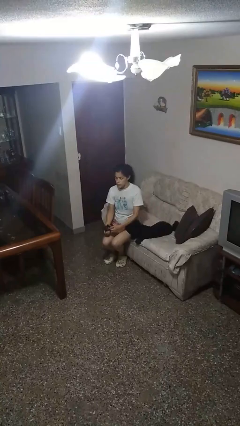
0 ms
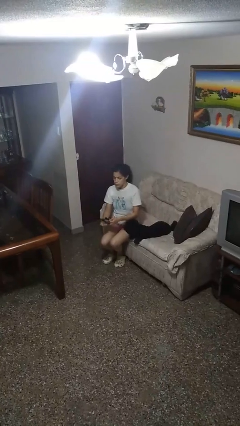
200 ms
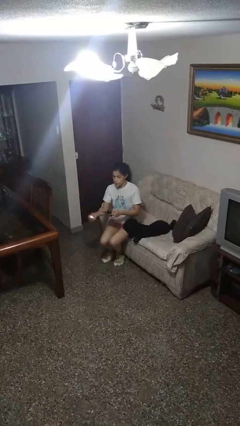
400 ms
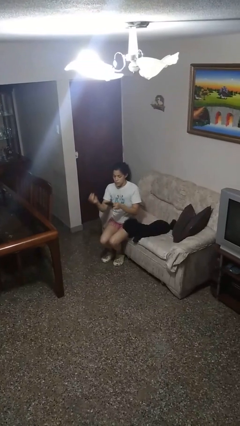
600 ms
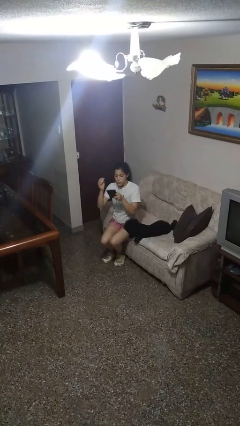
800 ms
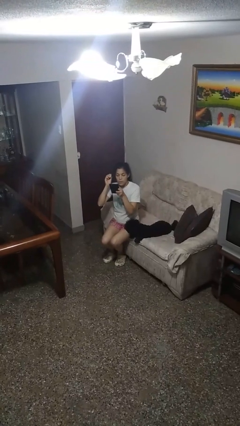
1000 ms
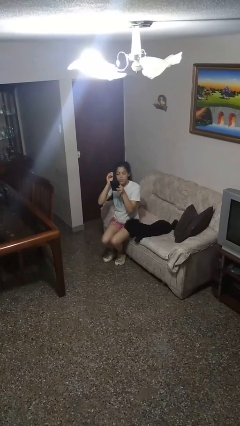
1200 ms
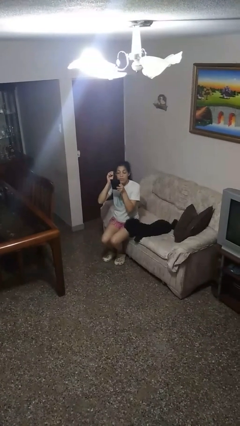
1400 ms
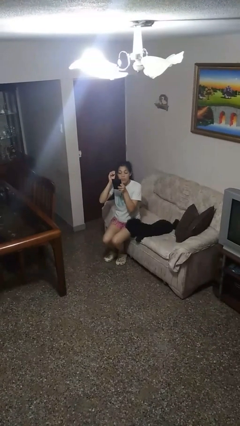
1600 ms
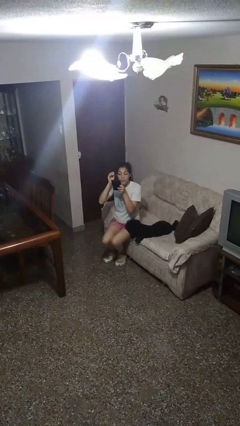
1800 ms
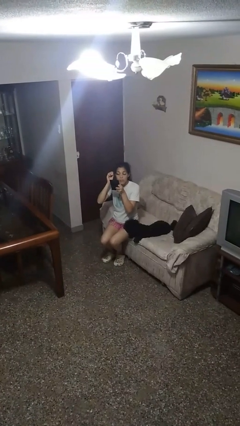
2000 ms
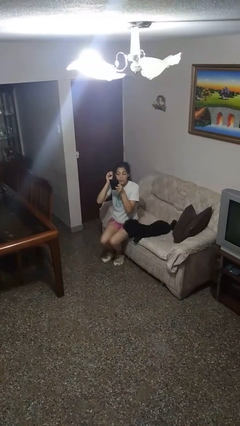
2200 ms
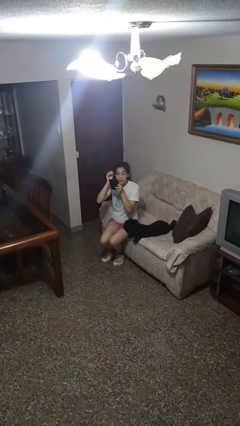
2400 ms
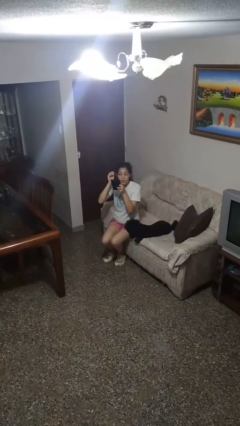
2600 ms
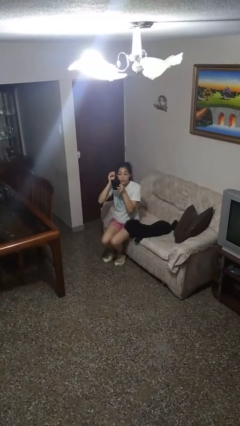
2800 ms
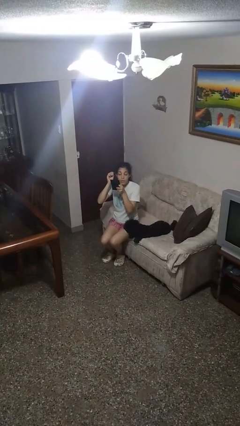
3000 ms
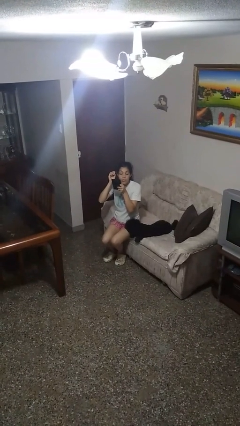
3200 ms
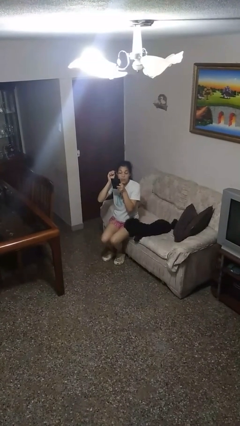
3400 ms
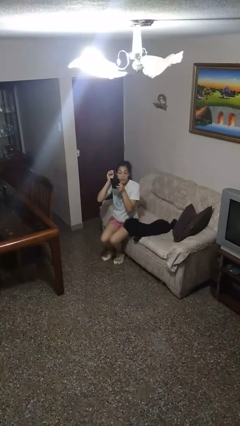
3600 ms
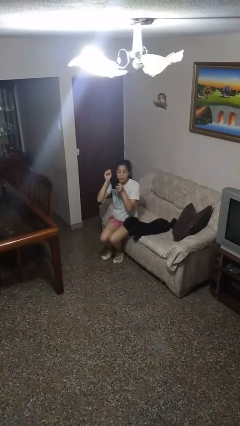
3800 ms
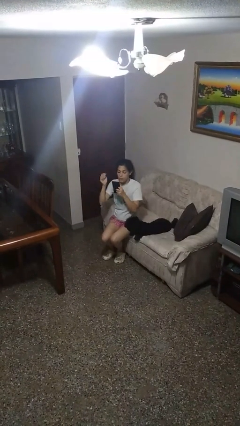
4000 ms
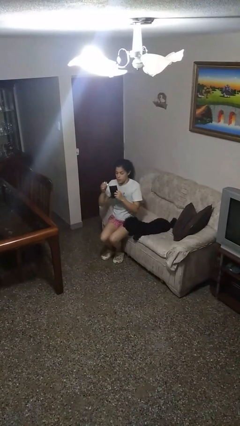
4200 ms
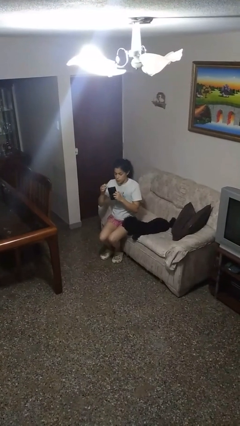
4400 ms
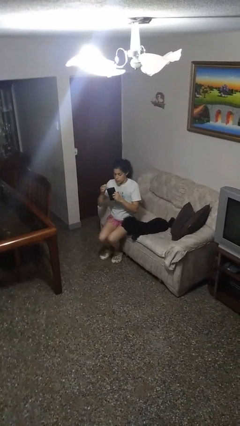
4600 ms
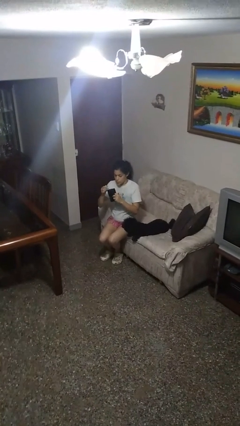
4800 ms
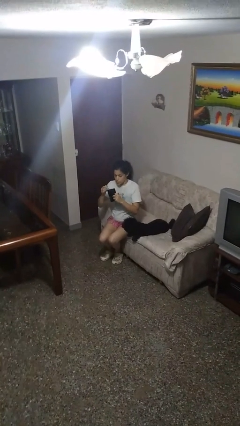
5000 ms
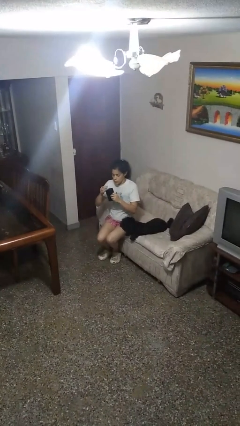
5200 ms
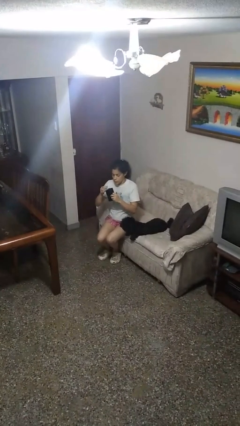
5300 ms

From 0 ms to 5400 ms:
person applies eye makeup

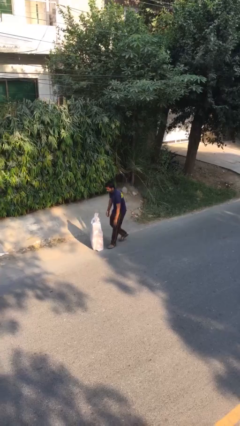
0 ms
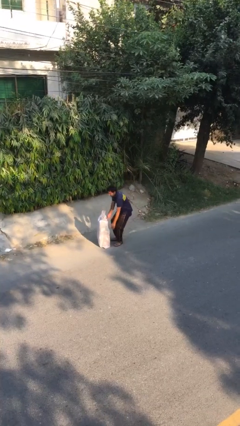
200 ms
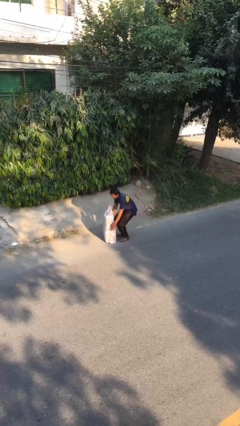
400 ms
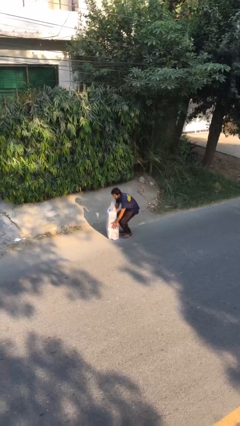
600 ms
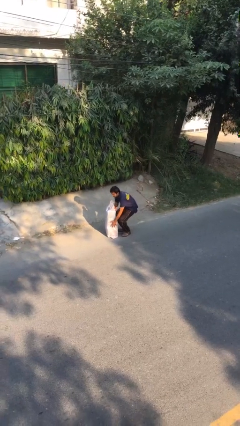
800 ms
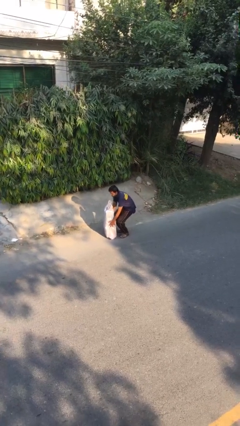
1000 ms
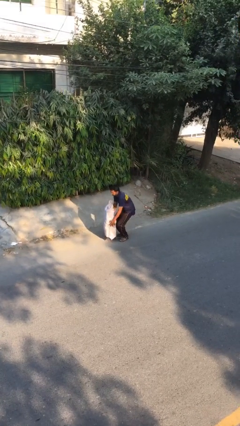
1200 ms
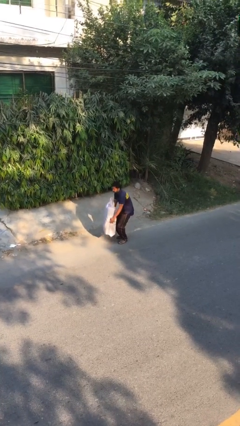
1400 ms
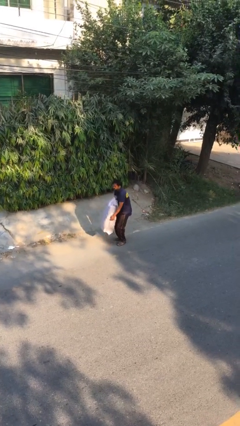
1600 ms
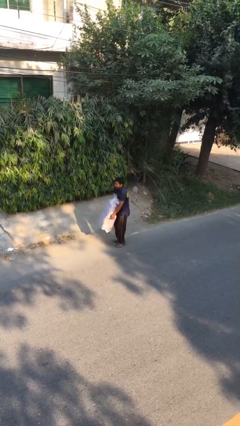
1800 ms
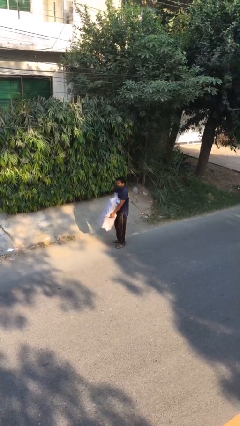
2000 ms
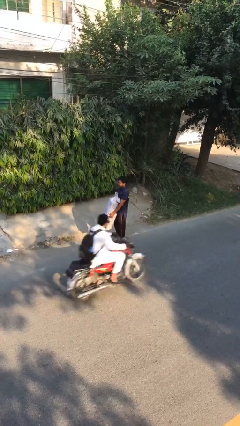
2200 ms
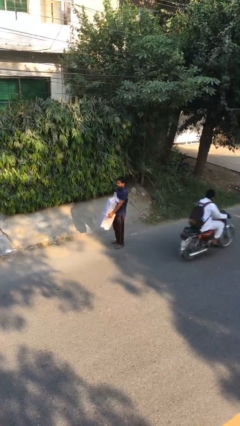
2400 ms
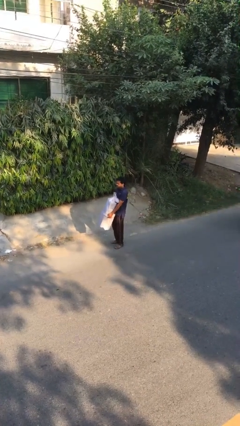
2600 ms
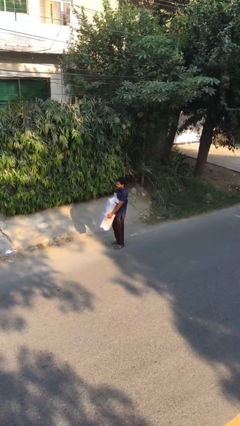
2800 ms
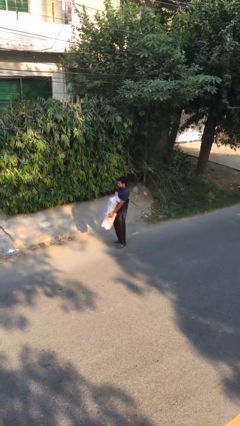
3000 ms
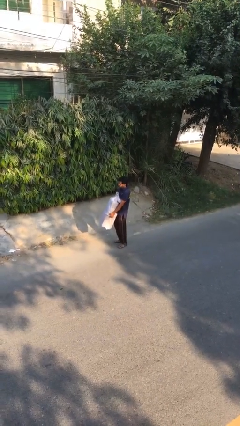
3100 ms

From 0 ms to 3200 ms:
person picks up object from floor

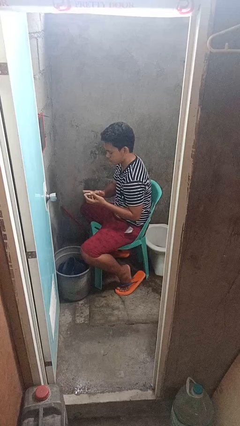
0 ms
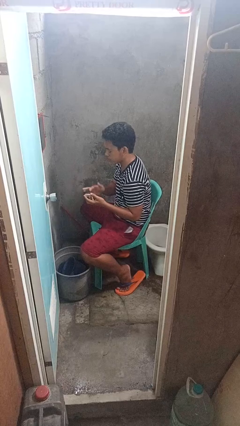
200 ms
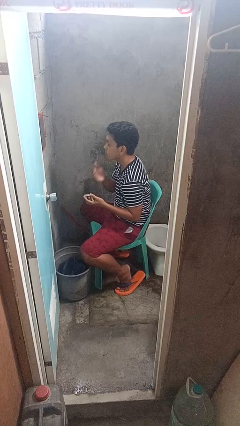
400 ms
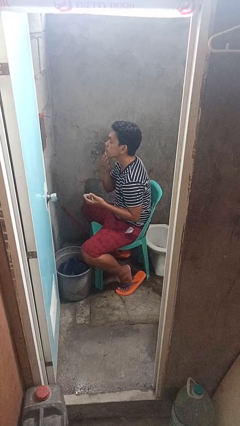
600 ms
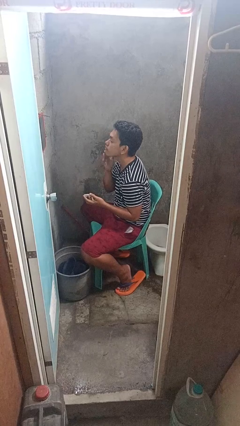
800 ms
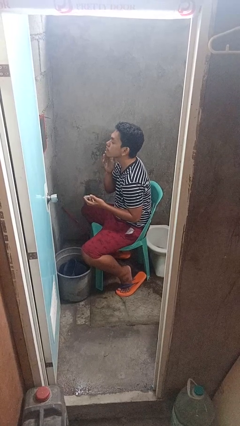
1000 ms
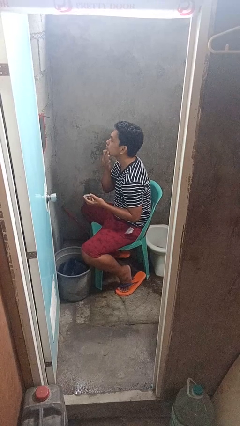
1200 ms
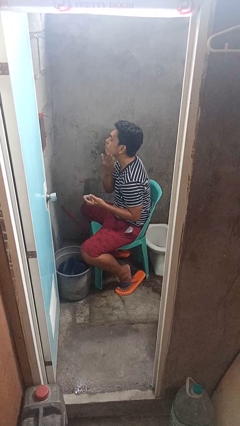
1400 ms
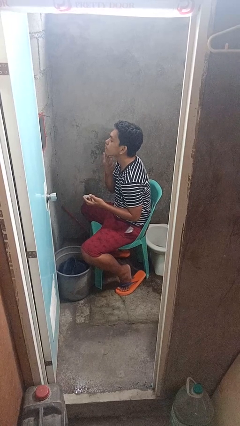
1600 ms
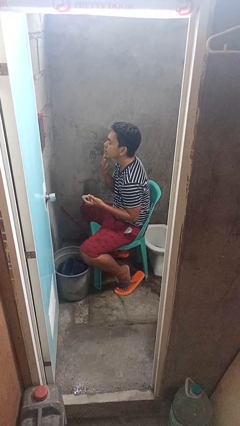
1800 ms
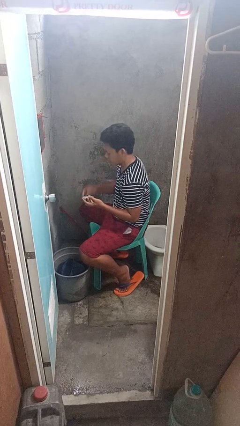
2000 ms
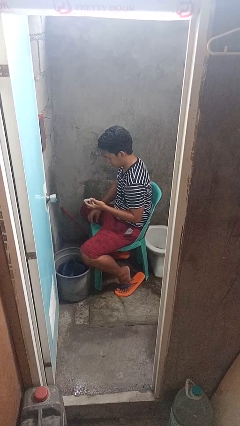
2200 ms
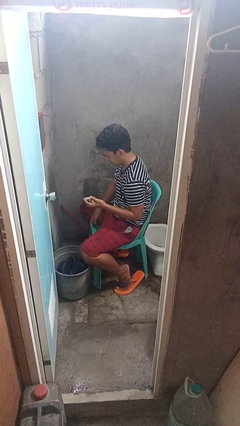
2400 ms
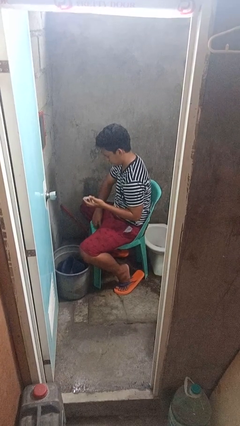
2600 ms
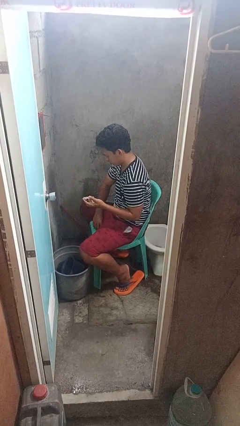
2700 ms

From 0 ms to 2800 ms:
person applies shaving cream

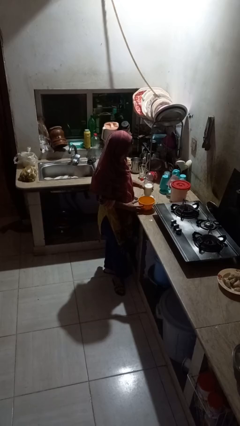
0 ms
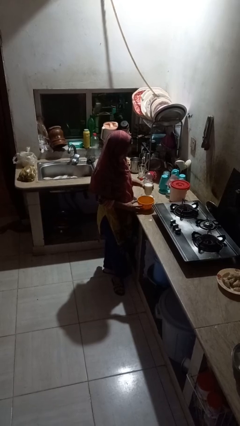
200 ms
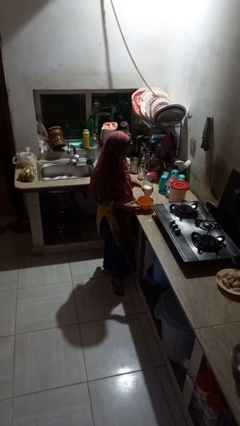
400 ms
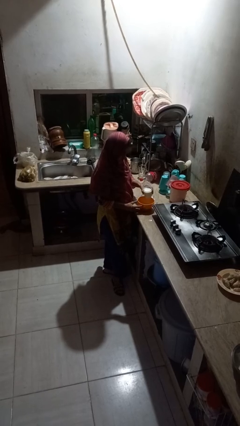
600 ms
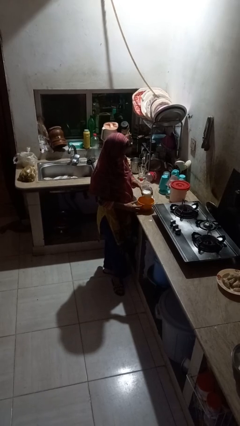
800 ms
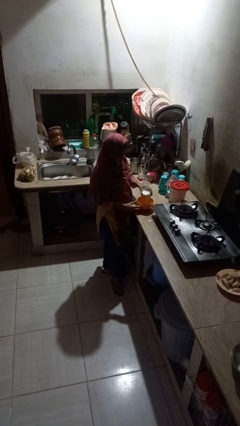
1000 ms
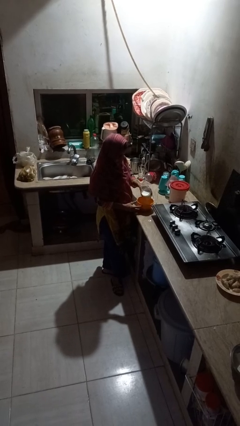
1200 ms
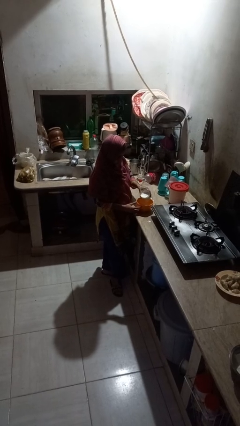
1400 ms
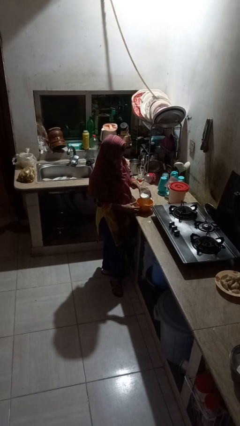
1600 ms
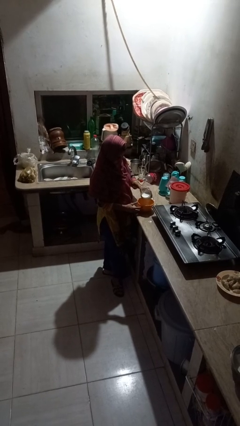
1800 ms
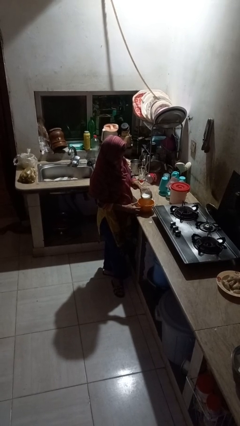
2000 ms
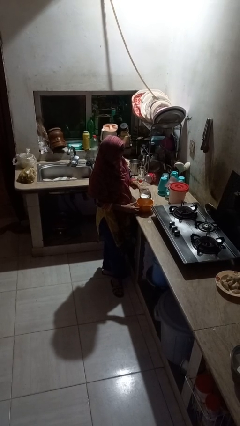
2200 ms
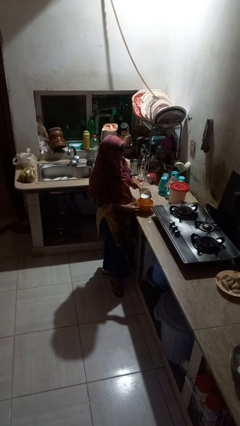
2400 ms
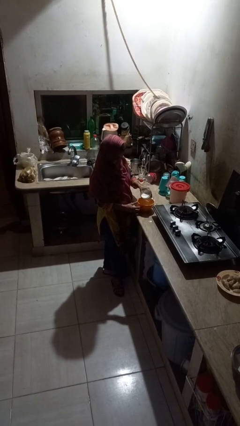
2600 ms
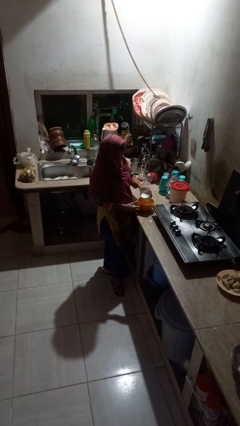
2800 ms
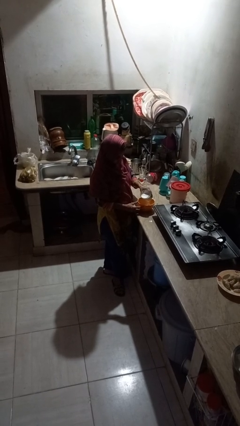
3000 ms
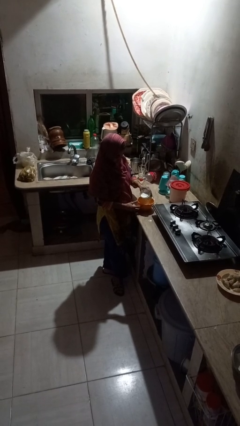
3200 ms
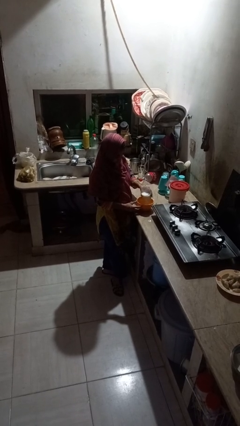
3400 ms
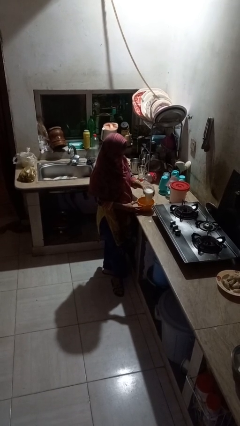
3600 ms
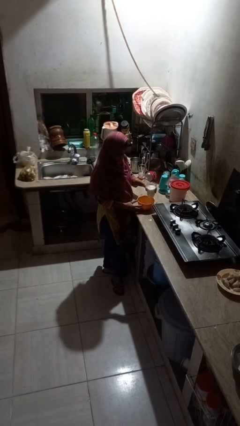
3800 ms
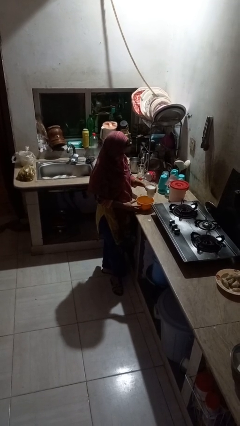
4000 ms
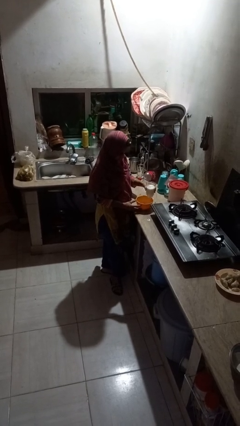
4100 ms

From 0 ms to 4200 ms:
person pours into bowl

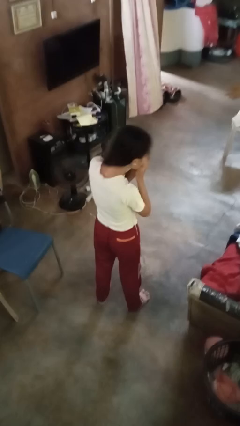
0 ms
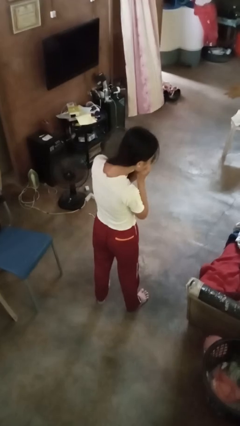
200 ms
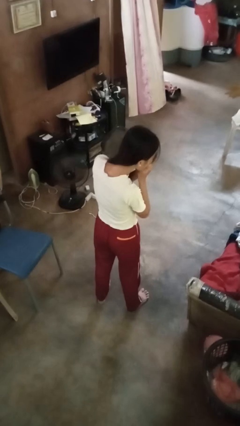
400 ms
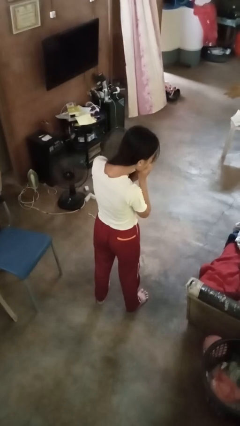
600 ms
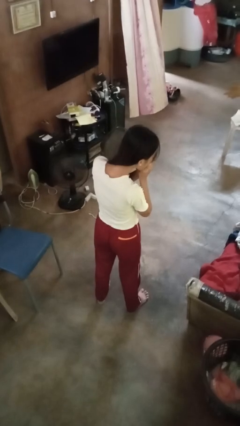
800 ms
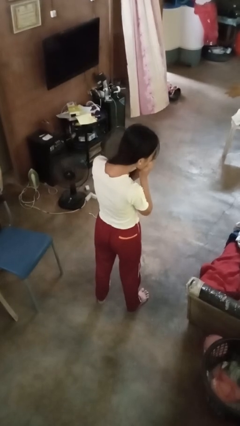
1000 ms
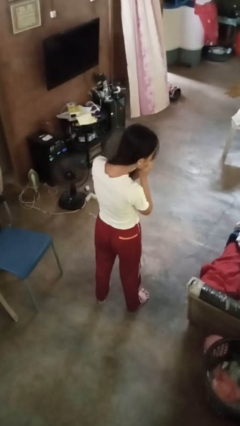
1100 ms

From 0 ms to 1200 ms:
person sneezes into hand

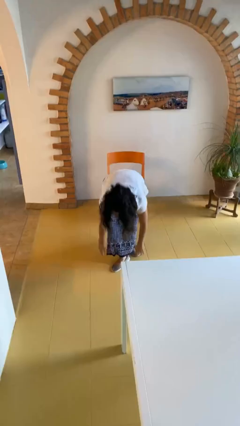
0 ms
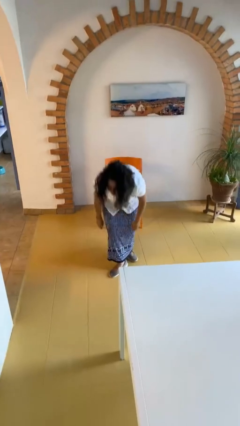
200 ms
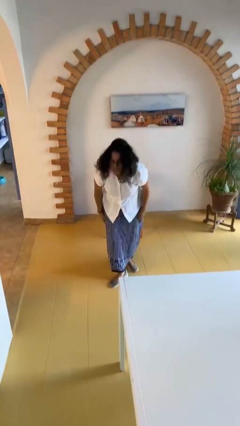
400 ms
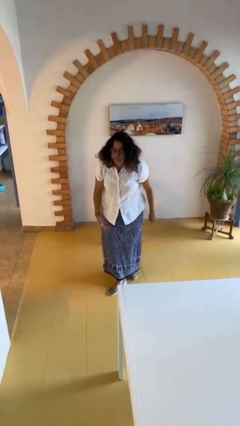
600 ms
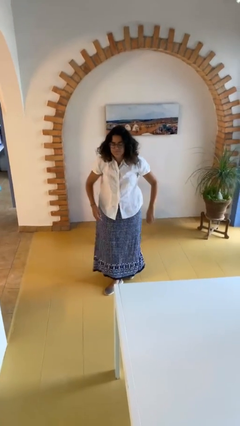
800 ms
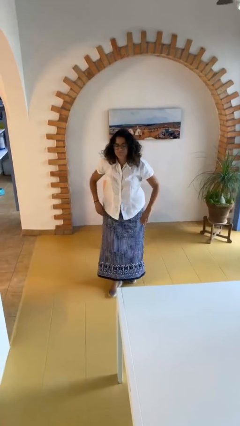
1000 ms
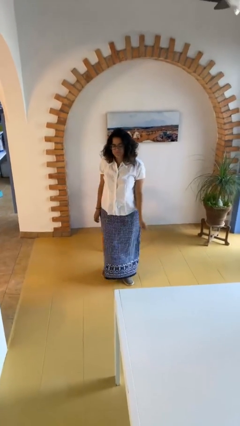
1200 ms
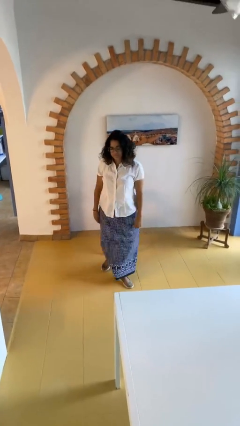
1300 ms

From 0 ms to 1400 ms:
person stands up from floor
